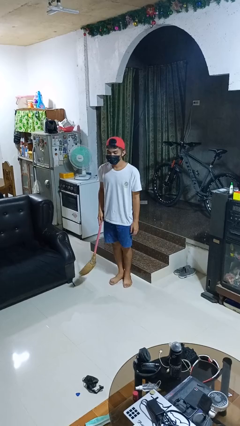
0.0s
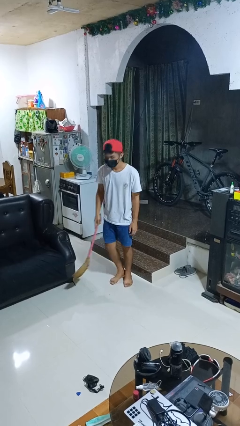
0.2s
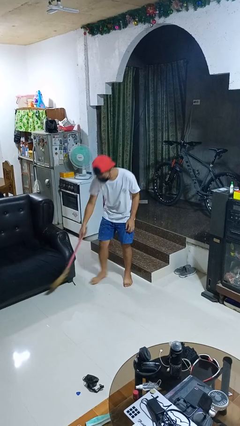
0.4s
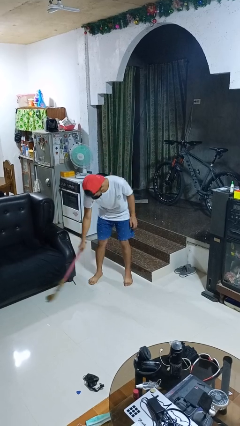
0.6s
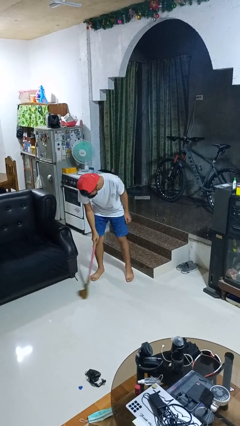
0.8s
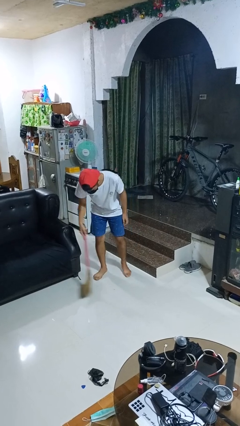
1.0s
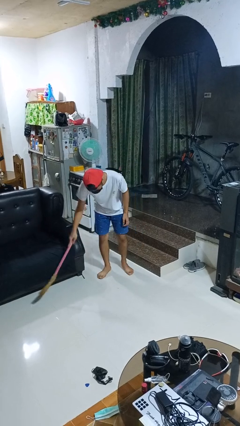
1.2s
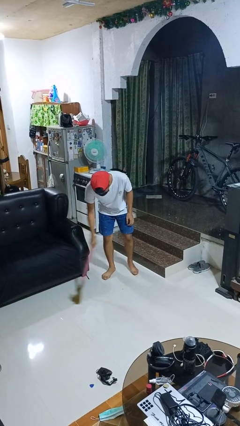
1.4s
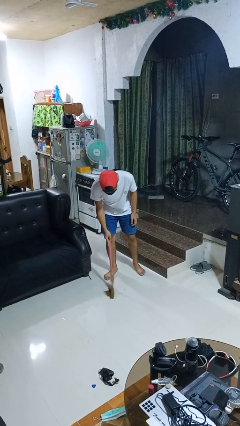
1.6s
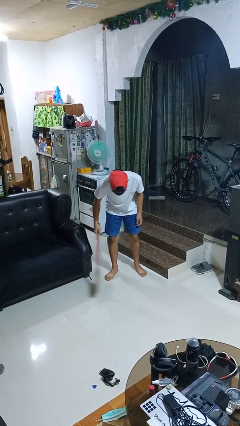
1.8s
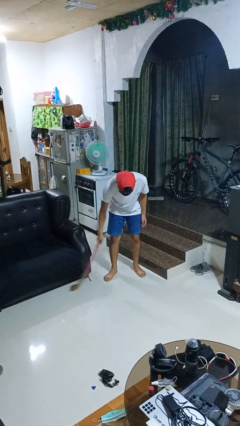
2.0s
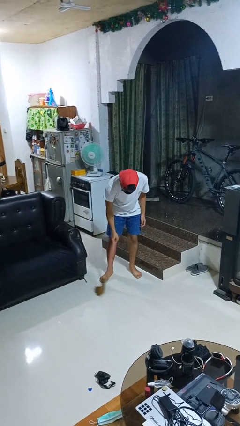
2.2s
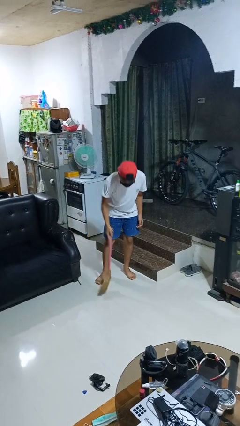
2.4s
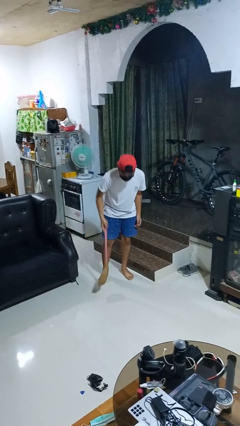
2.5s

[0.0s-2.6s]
person sweeps floor

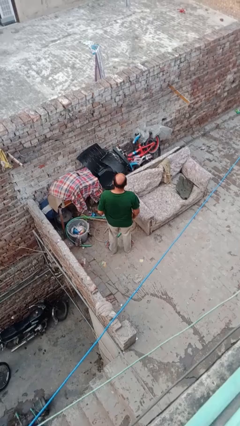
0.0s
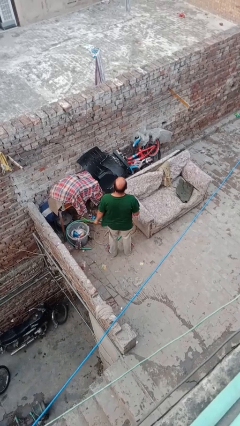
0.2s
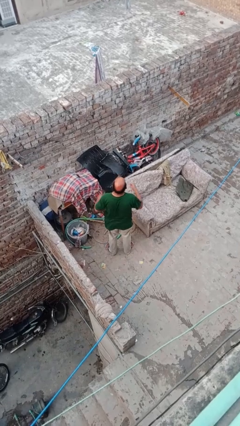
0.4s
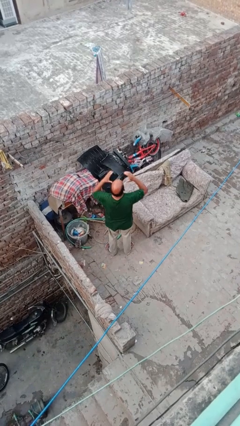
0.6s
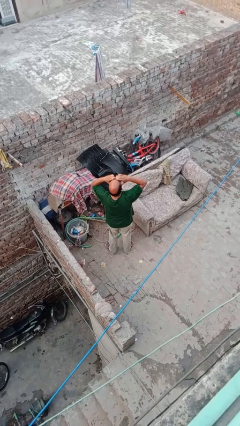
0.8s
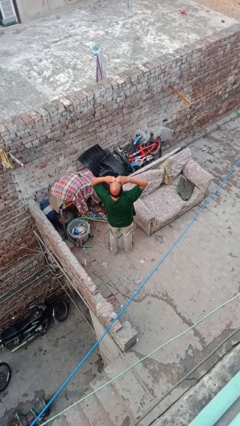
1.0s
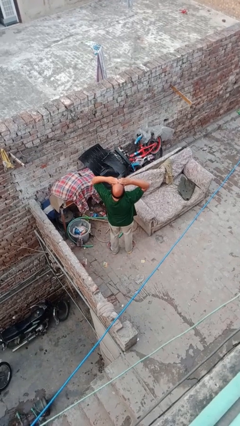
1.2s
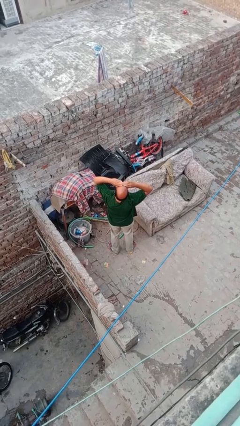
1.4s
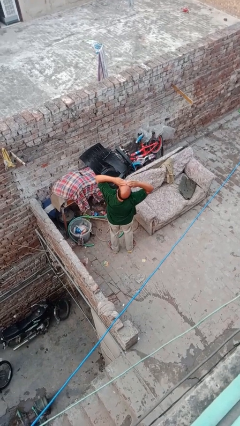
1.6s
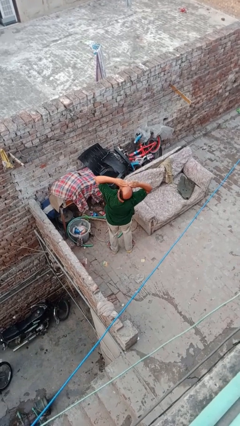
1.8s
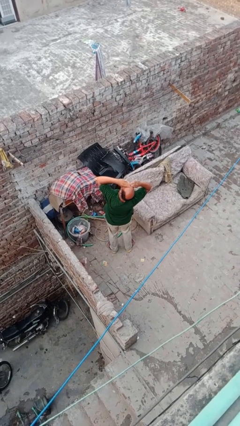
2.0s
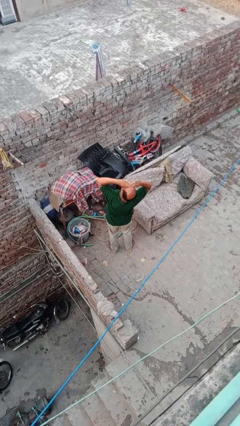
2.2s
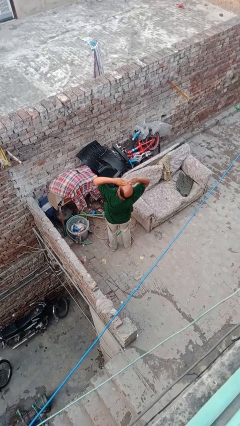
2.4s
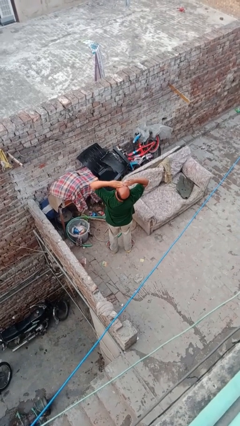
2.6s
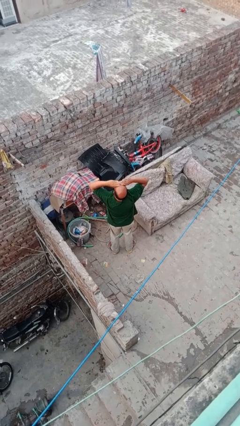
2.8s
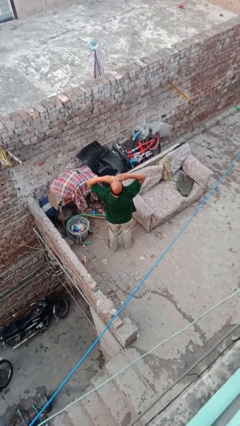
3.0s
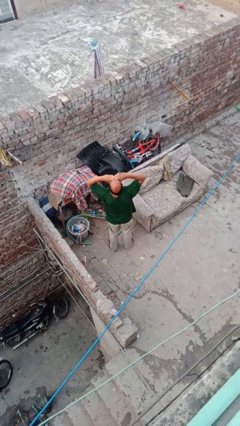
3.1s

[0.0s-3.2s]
person shades eyes

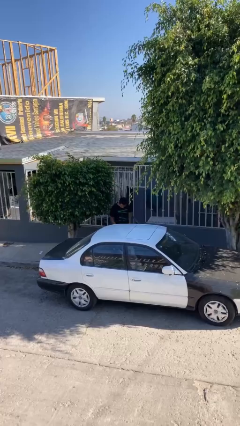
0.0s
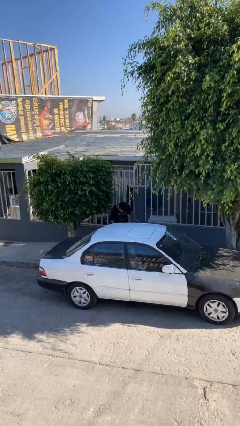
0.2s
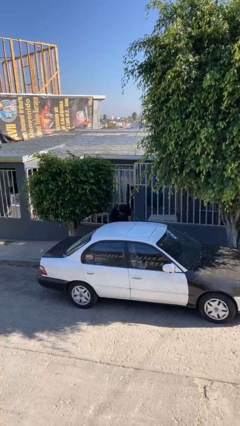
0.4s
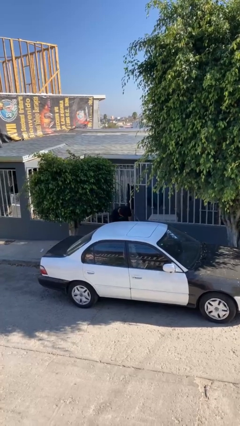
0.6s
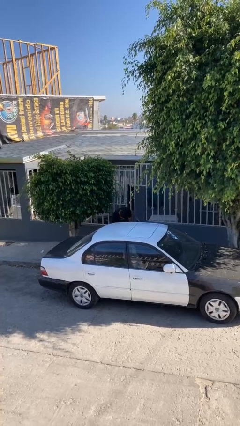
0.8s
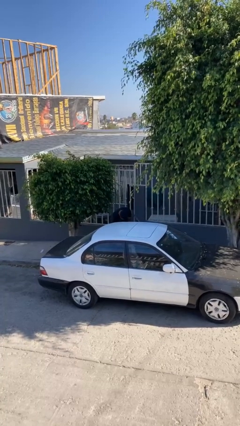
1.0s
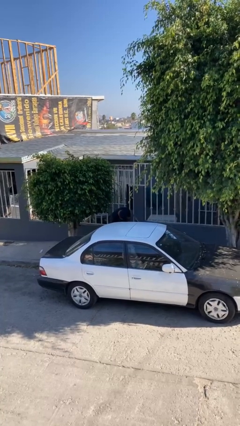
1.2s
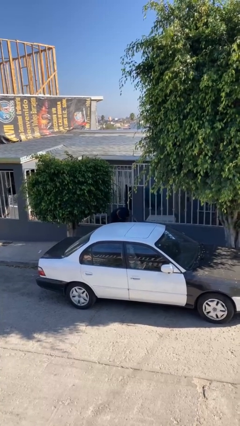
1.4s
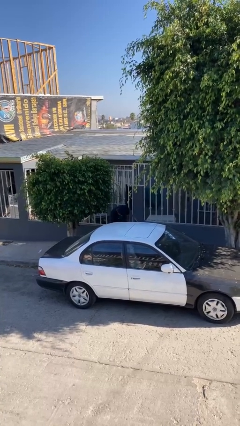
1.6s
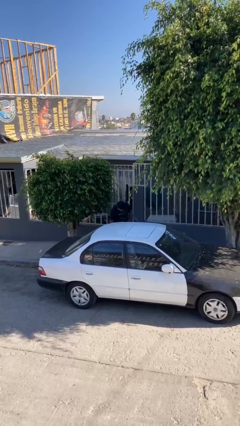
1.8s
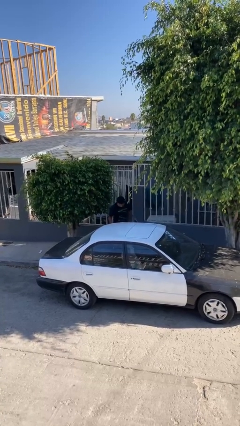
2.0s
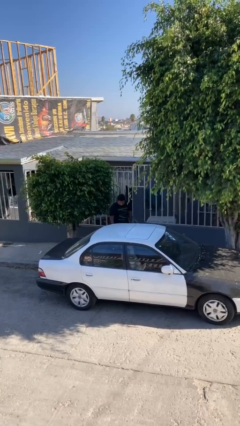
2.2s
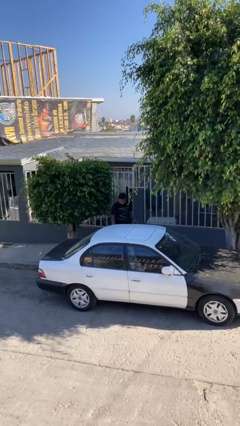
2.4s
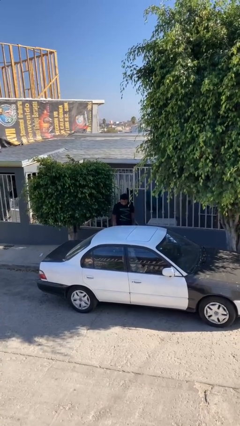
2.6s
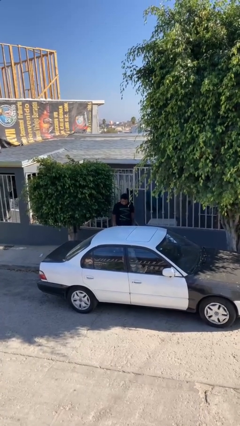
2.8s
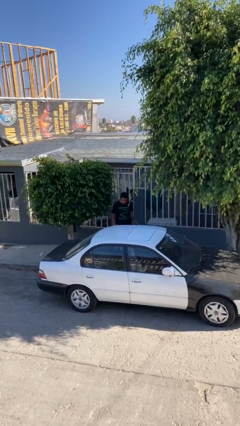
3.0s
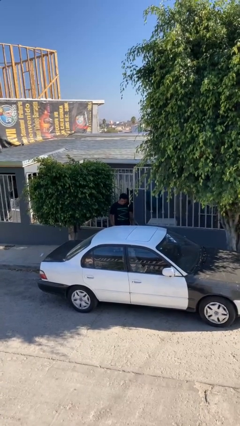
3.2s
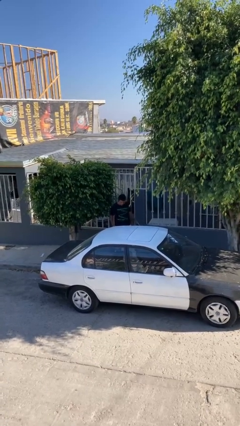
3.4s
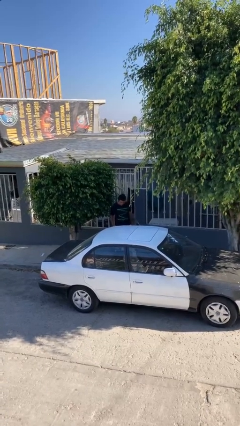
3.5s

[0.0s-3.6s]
person loads car

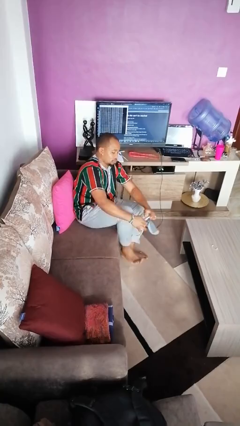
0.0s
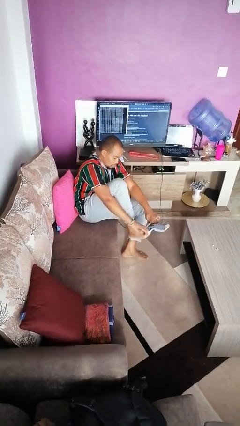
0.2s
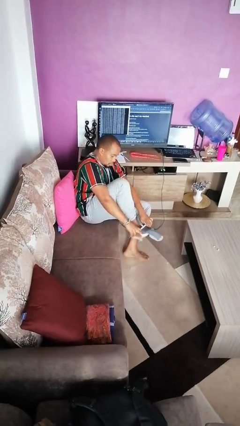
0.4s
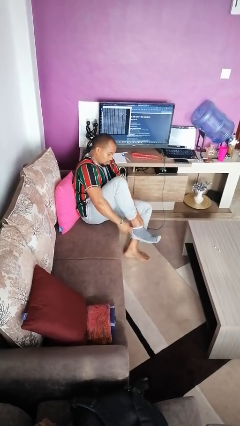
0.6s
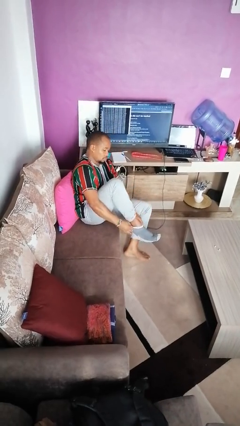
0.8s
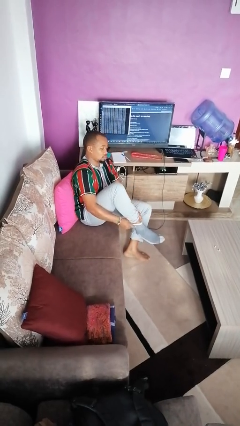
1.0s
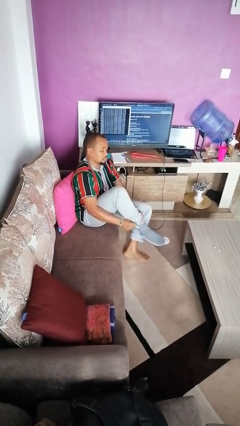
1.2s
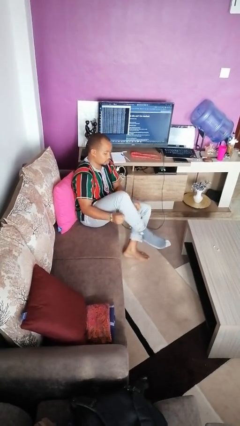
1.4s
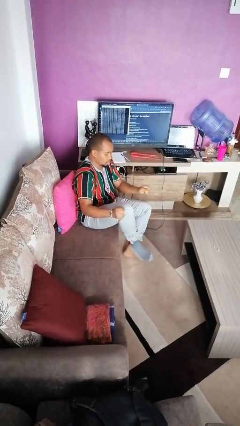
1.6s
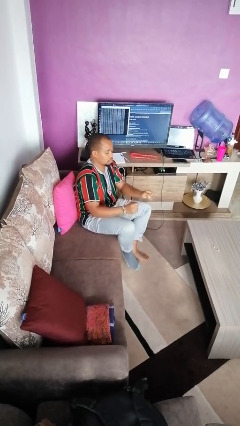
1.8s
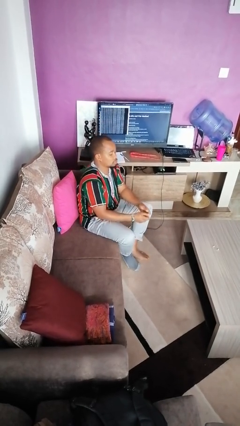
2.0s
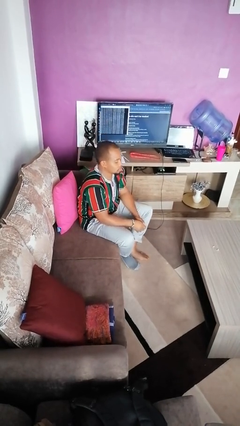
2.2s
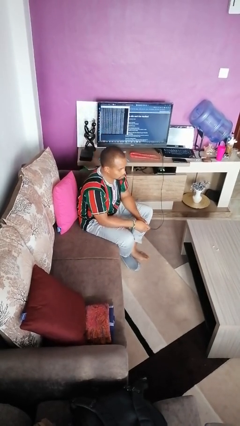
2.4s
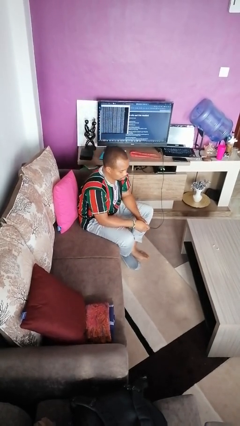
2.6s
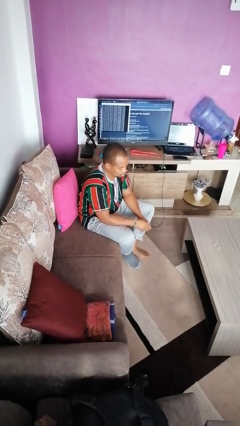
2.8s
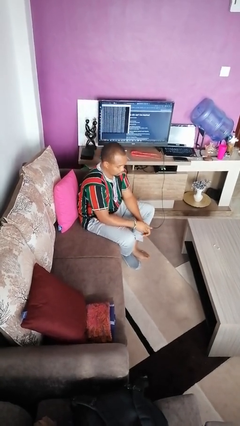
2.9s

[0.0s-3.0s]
person puts on socks

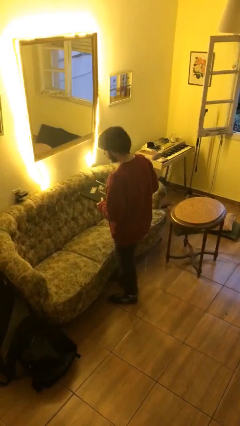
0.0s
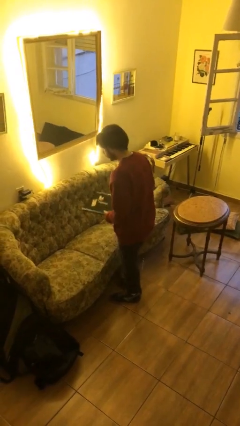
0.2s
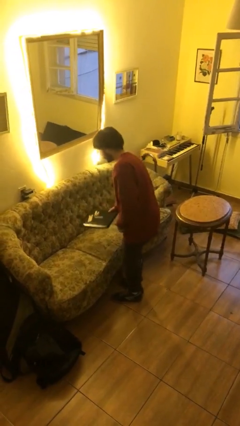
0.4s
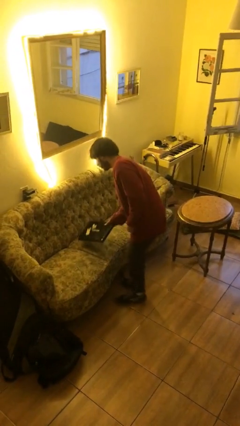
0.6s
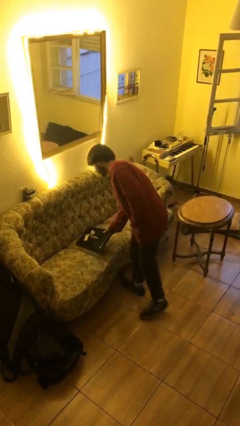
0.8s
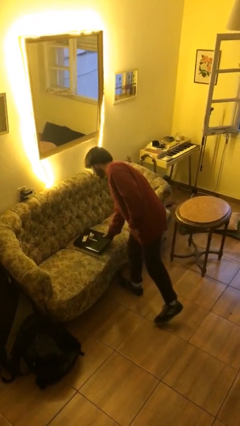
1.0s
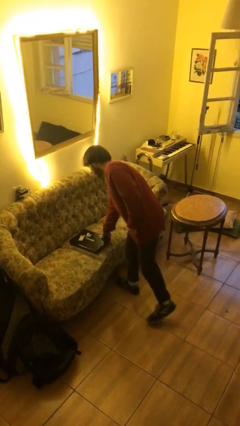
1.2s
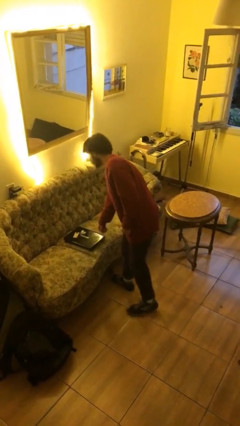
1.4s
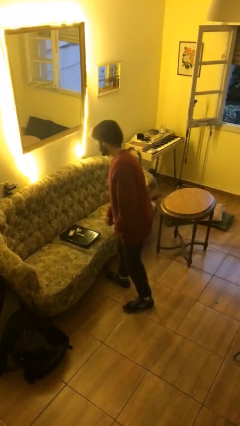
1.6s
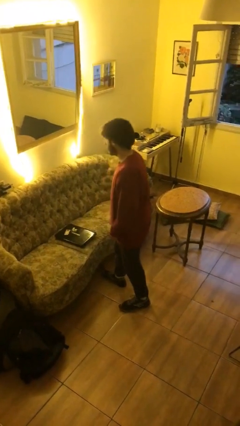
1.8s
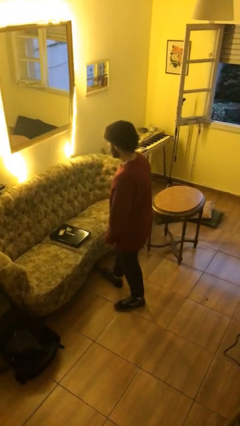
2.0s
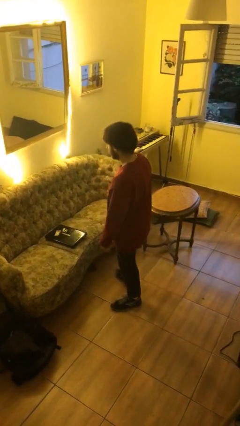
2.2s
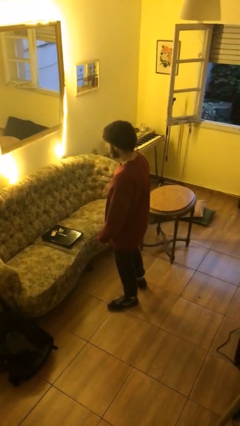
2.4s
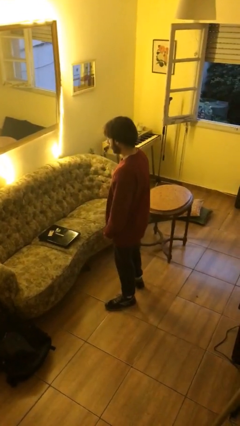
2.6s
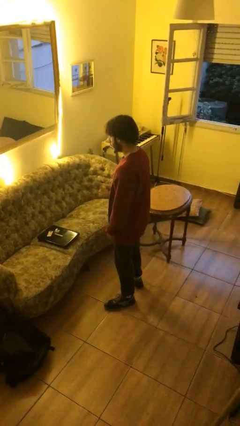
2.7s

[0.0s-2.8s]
person puts down object on couch

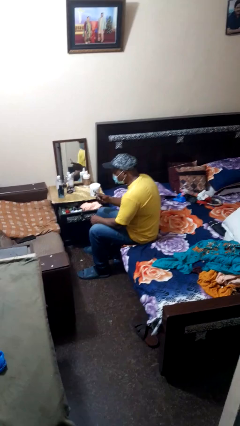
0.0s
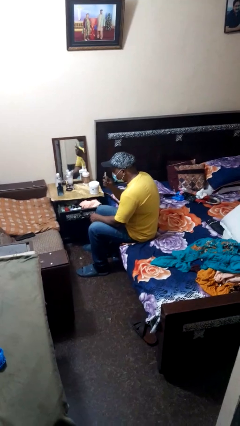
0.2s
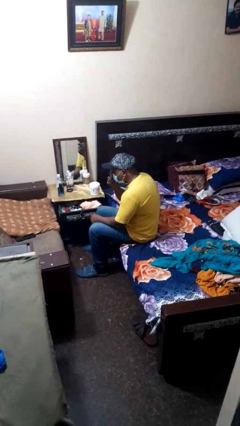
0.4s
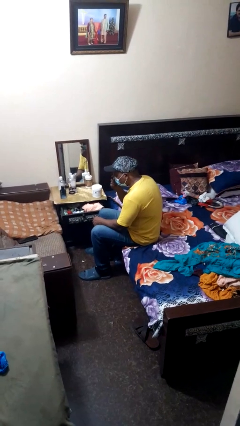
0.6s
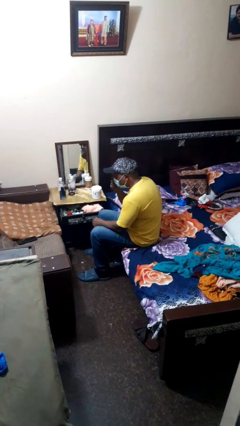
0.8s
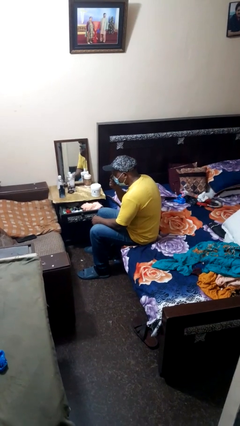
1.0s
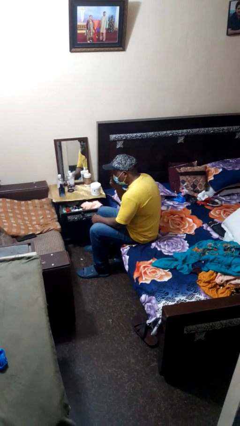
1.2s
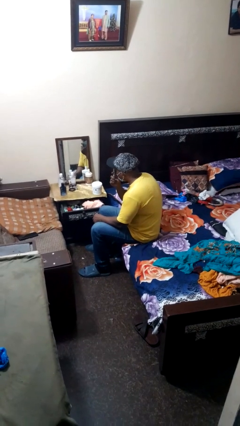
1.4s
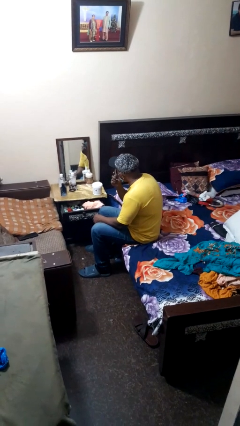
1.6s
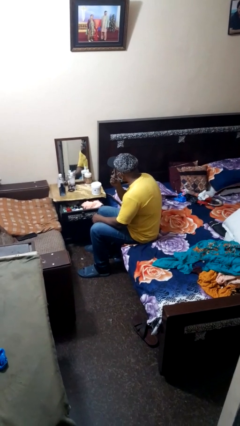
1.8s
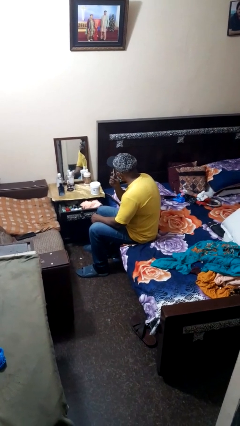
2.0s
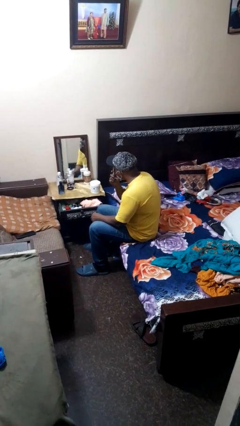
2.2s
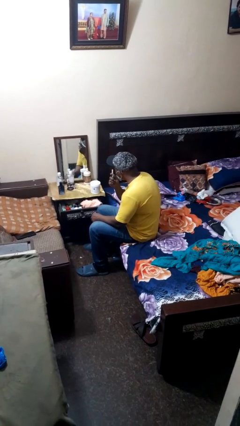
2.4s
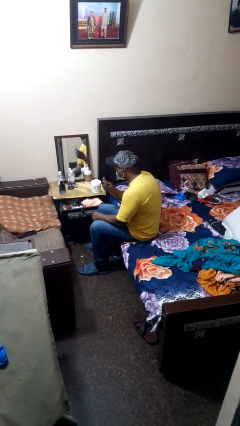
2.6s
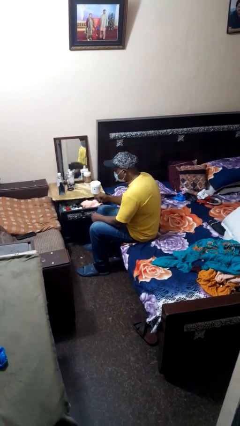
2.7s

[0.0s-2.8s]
person applies eye makeup
